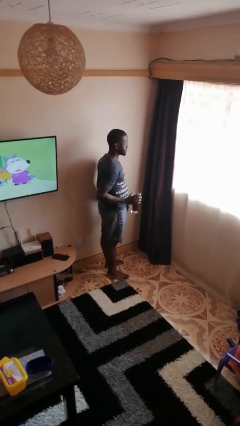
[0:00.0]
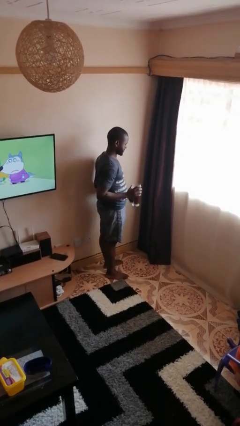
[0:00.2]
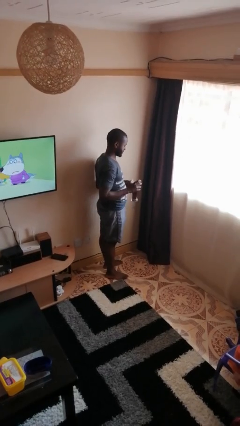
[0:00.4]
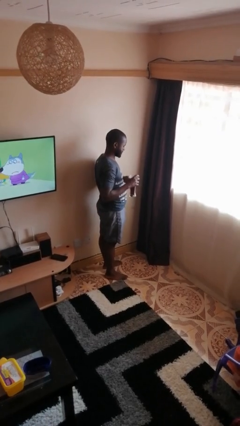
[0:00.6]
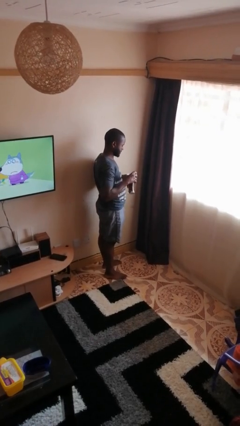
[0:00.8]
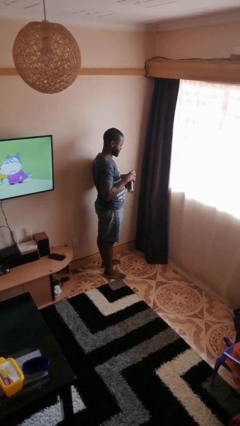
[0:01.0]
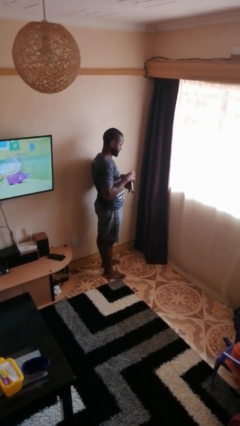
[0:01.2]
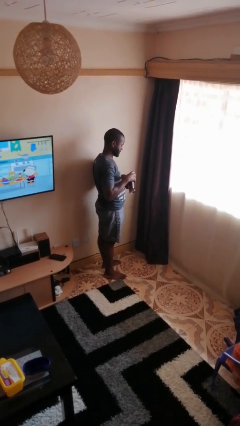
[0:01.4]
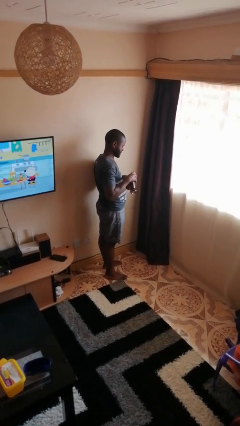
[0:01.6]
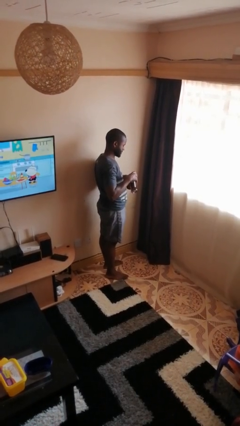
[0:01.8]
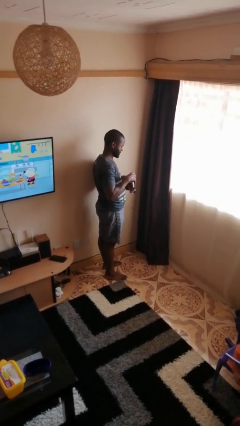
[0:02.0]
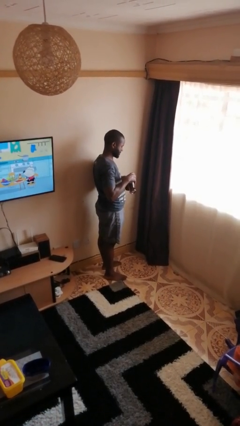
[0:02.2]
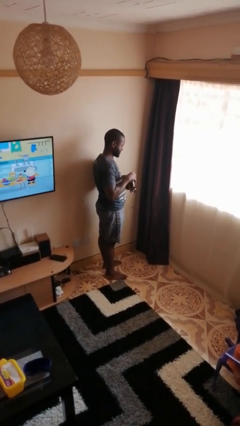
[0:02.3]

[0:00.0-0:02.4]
person pours coffee into mug

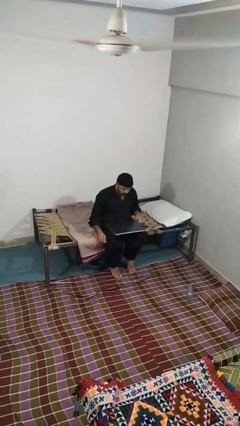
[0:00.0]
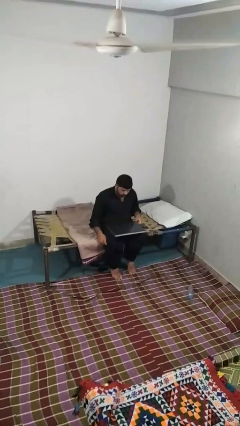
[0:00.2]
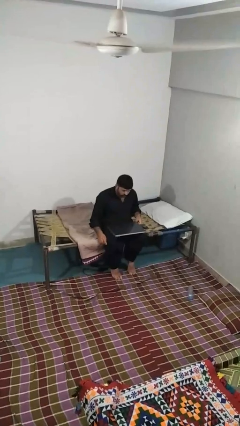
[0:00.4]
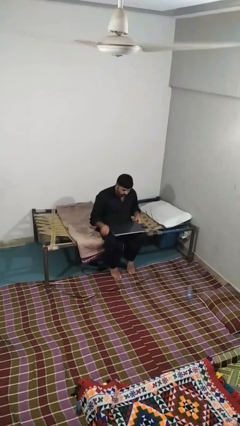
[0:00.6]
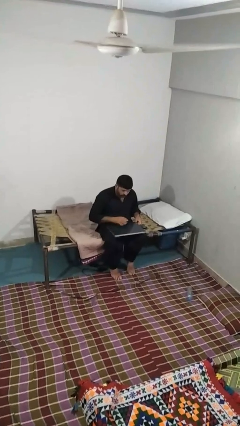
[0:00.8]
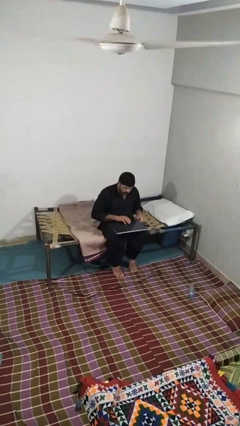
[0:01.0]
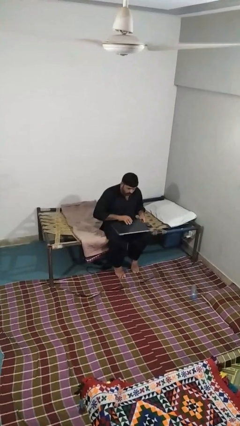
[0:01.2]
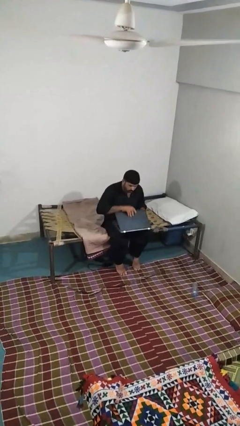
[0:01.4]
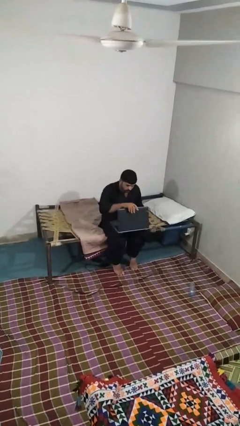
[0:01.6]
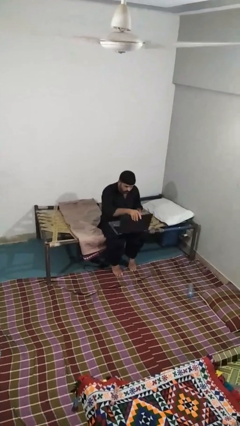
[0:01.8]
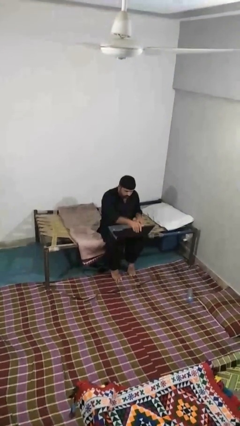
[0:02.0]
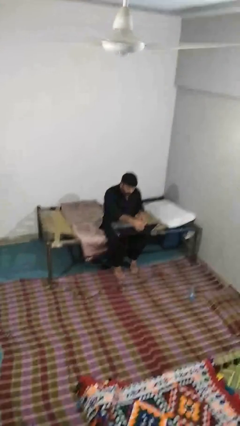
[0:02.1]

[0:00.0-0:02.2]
person opens laptop

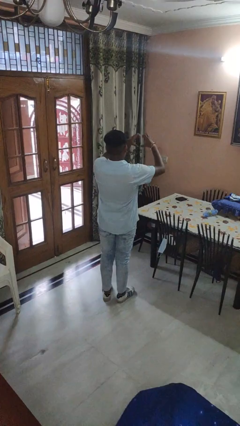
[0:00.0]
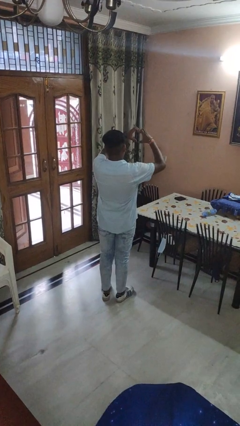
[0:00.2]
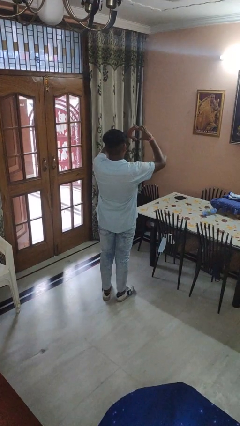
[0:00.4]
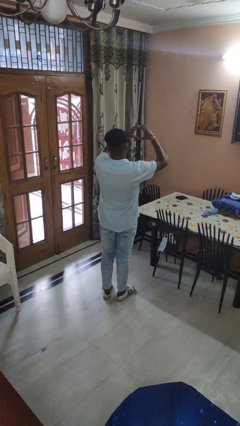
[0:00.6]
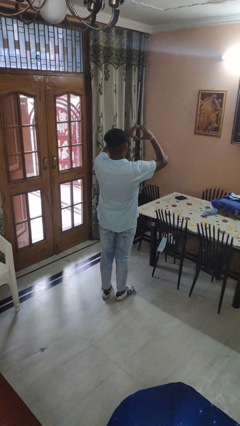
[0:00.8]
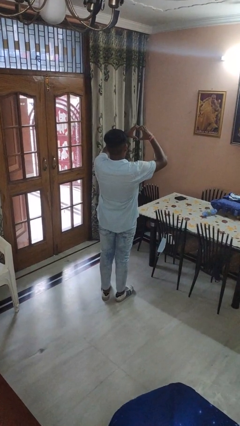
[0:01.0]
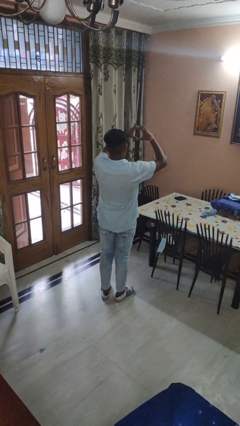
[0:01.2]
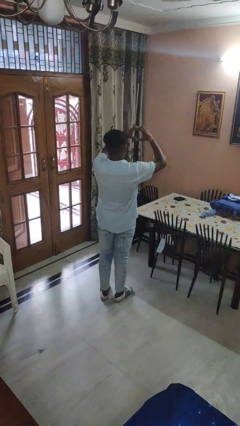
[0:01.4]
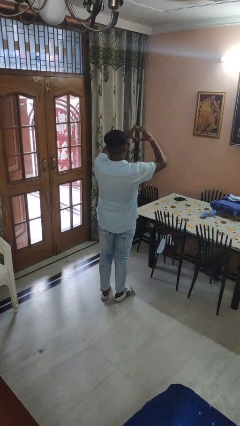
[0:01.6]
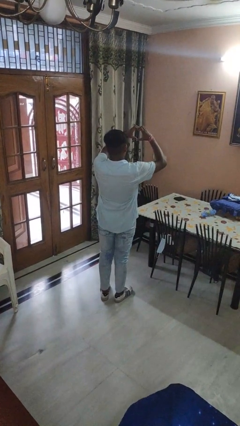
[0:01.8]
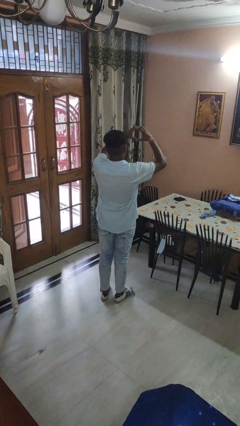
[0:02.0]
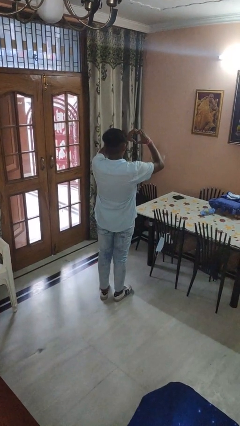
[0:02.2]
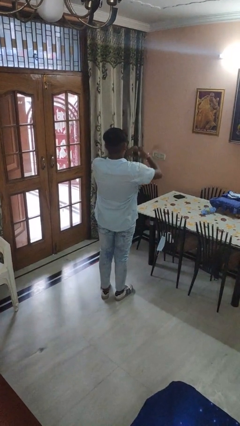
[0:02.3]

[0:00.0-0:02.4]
person gestures heart

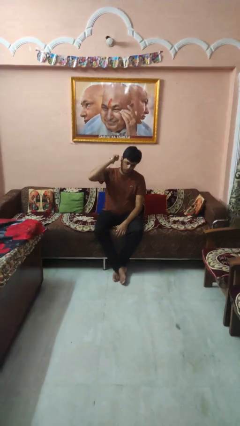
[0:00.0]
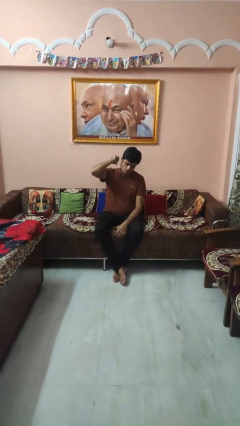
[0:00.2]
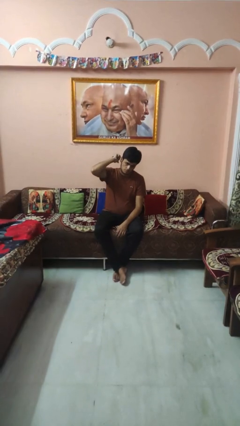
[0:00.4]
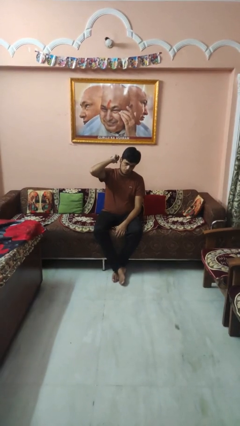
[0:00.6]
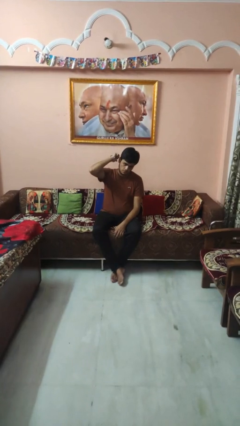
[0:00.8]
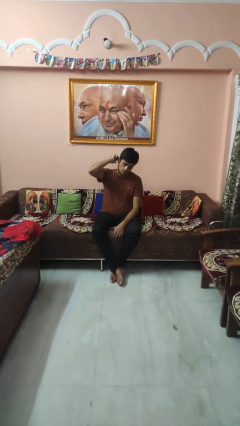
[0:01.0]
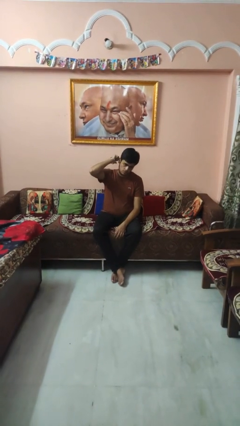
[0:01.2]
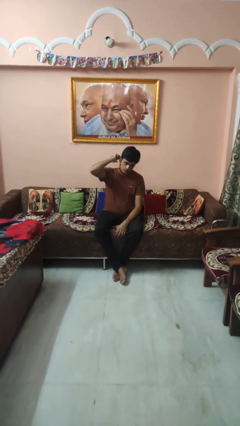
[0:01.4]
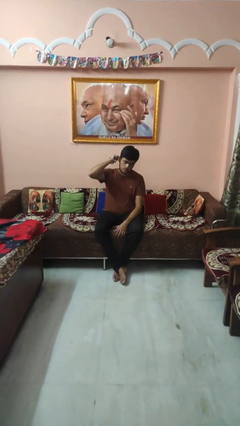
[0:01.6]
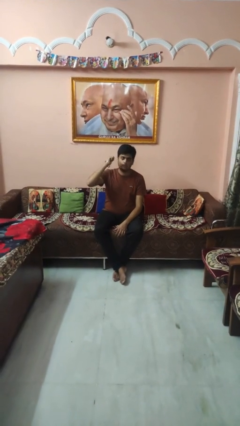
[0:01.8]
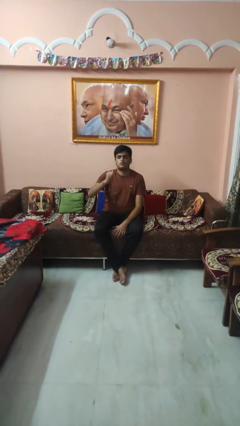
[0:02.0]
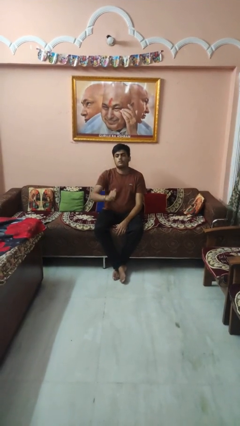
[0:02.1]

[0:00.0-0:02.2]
person gestures behind me

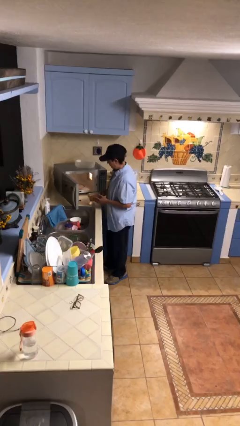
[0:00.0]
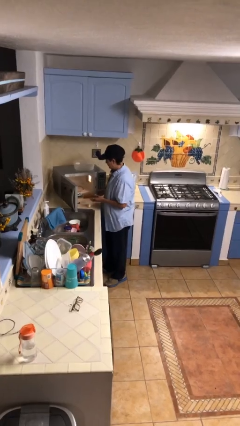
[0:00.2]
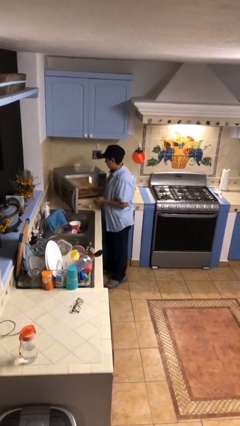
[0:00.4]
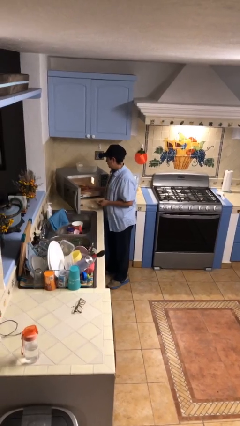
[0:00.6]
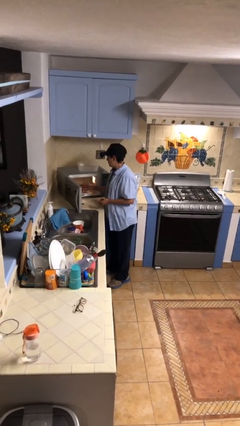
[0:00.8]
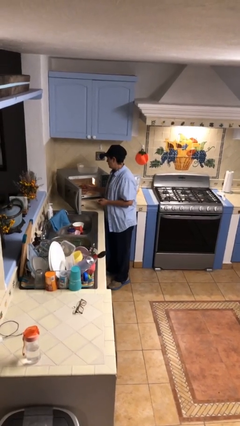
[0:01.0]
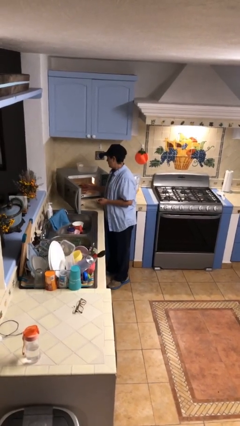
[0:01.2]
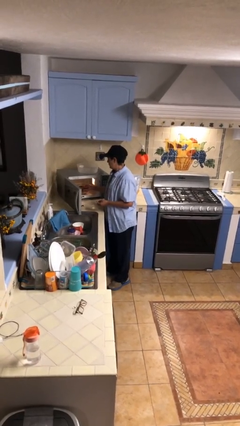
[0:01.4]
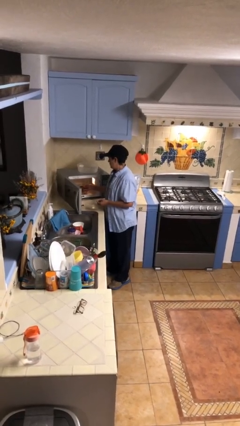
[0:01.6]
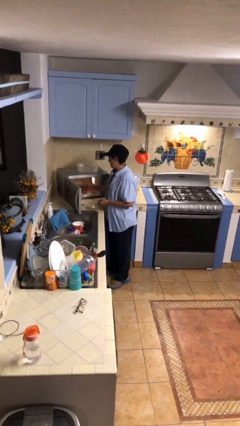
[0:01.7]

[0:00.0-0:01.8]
person puts object into microwave

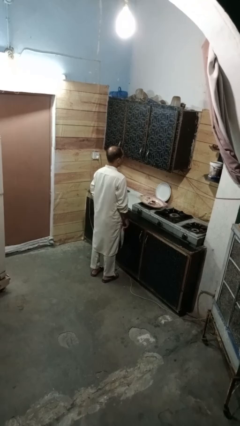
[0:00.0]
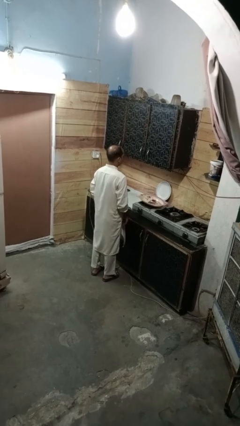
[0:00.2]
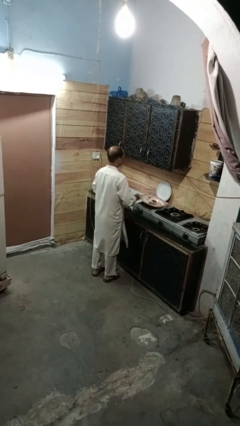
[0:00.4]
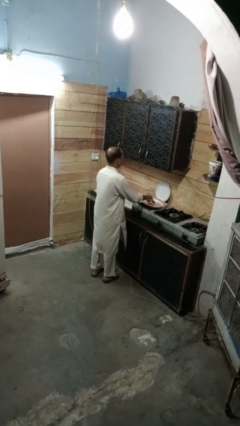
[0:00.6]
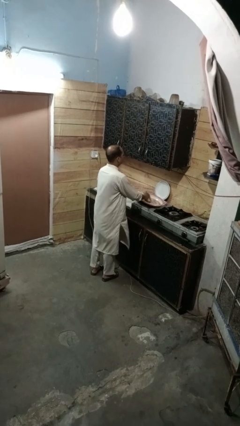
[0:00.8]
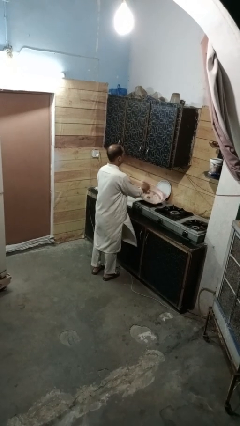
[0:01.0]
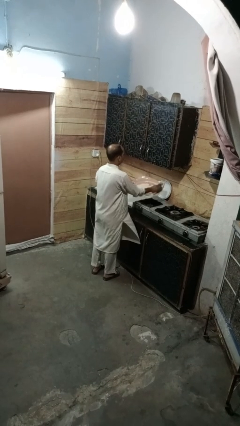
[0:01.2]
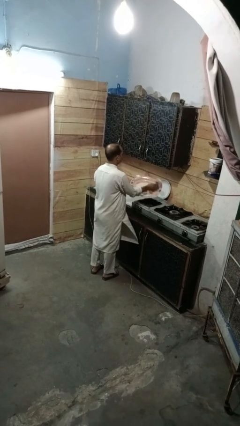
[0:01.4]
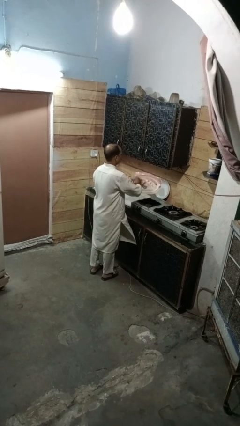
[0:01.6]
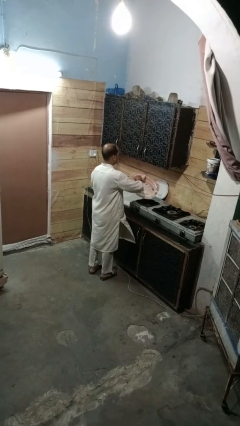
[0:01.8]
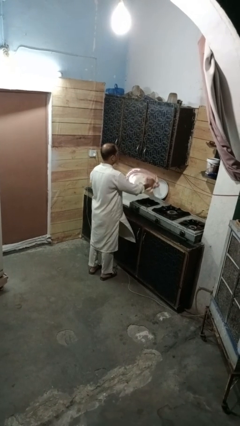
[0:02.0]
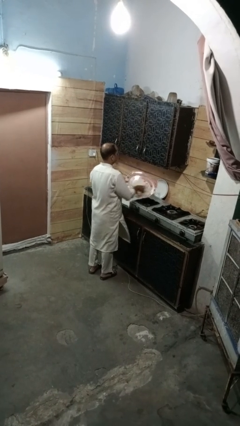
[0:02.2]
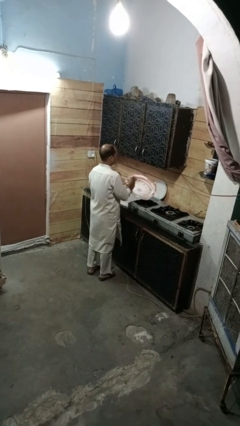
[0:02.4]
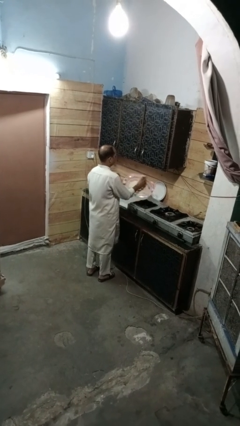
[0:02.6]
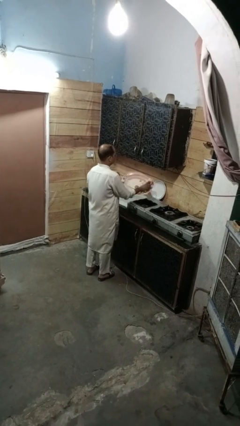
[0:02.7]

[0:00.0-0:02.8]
person dries dish

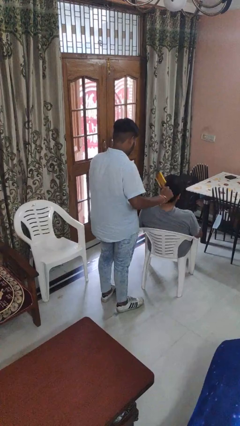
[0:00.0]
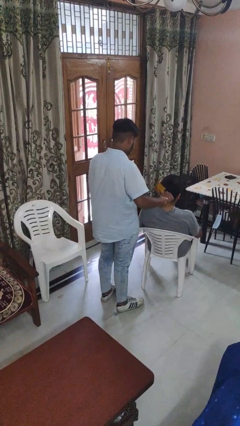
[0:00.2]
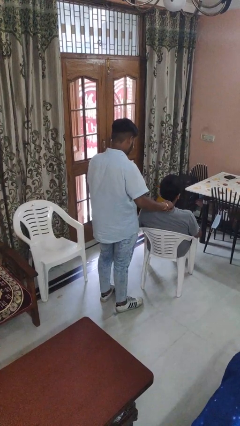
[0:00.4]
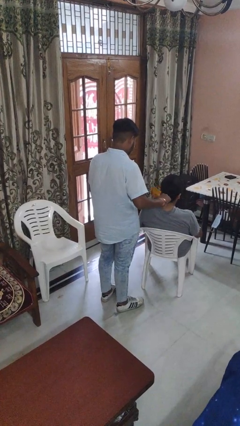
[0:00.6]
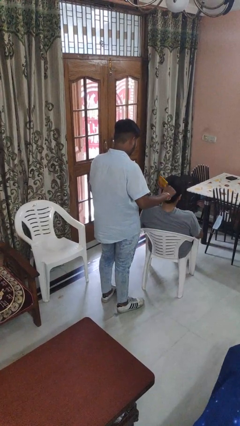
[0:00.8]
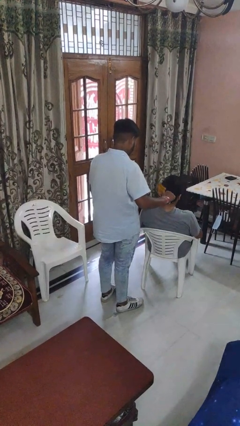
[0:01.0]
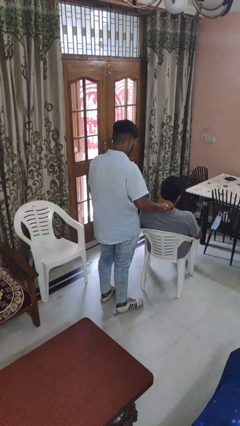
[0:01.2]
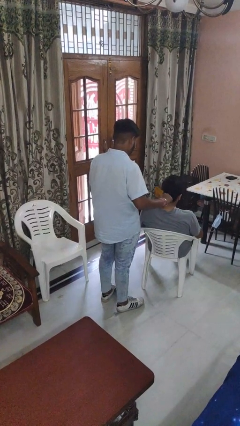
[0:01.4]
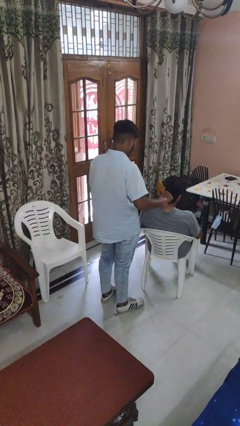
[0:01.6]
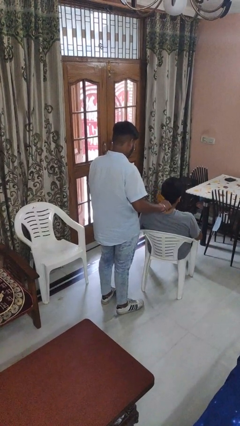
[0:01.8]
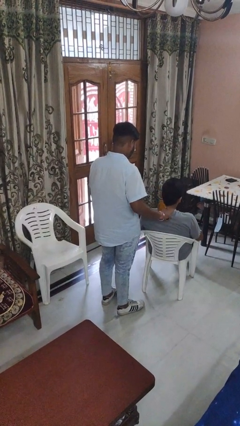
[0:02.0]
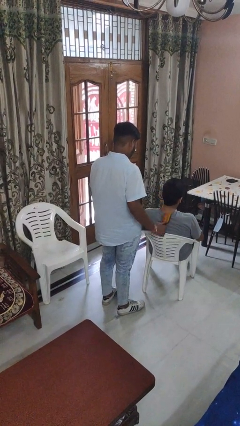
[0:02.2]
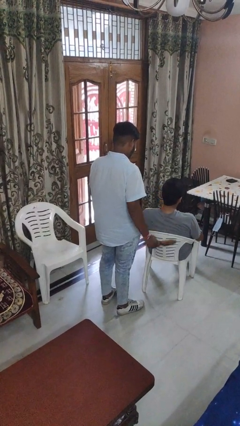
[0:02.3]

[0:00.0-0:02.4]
person brushes hair of person

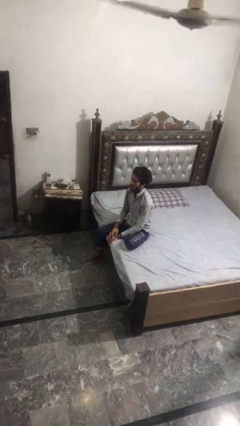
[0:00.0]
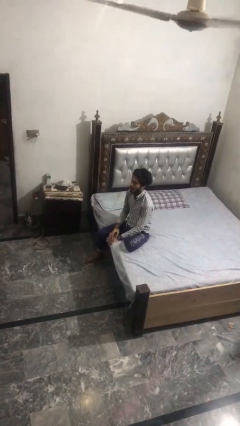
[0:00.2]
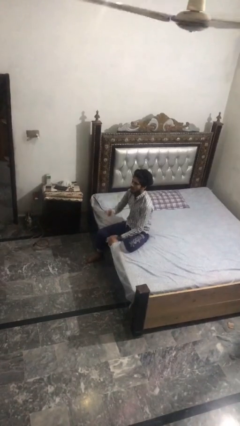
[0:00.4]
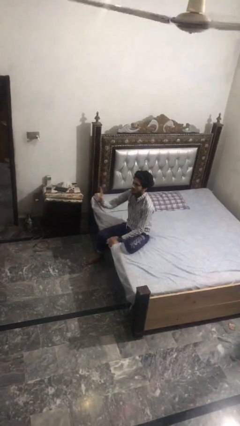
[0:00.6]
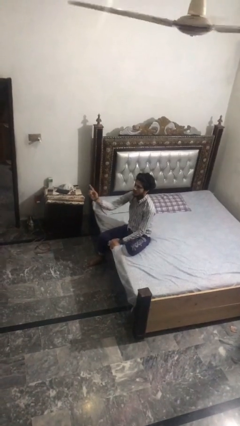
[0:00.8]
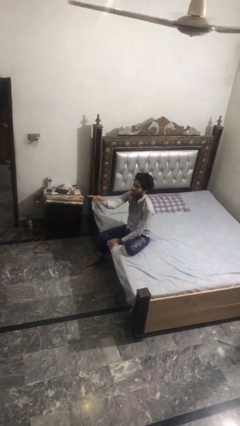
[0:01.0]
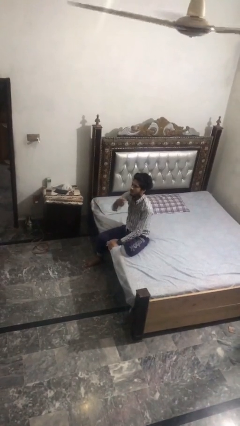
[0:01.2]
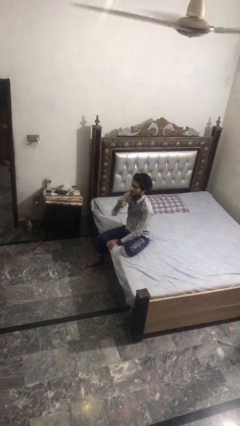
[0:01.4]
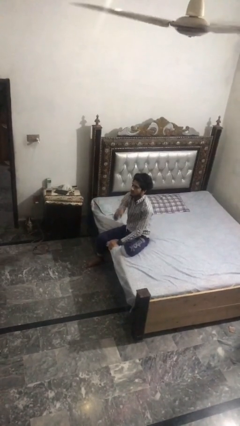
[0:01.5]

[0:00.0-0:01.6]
person gestures swipe left
